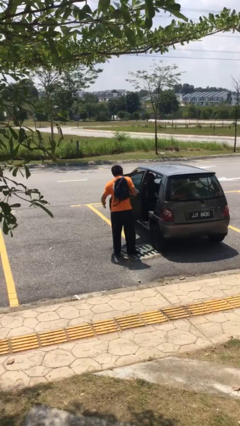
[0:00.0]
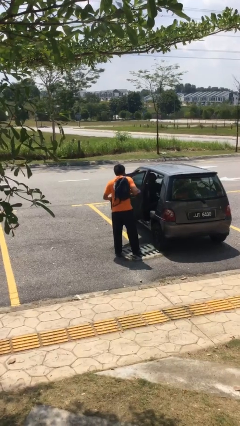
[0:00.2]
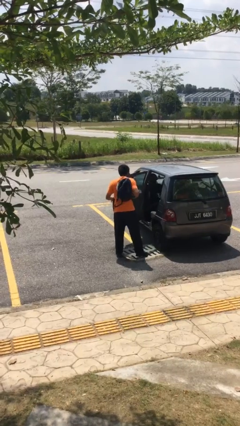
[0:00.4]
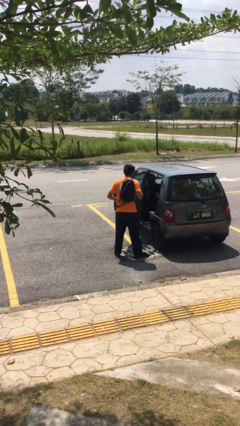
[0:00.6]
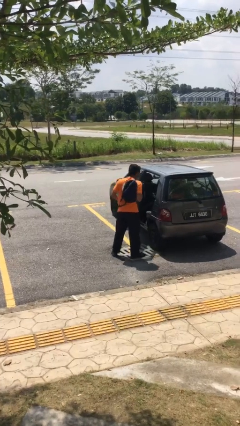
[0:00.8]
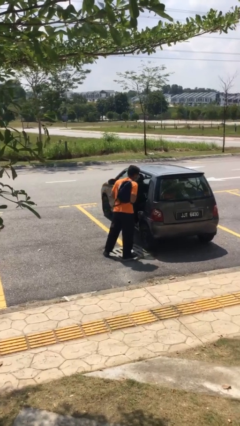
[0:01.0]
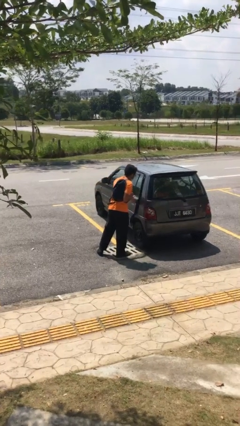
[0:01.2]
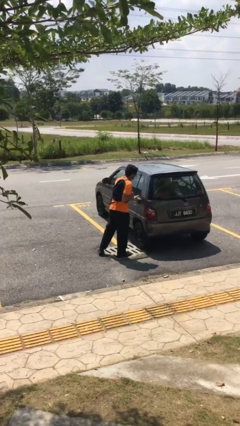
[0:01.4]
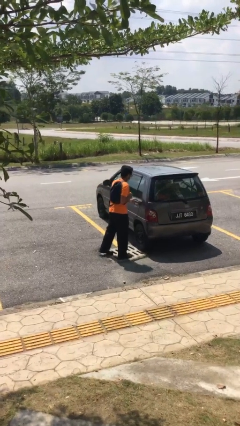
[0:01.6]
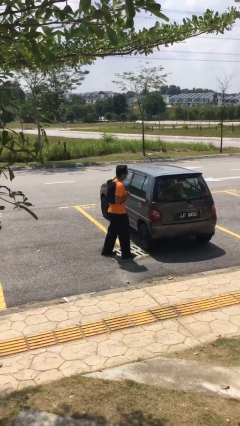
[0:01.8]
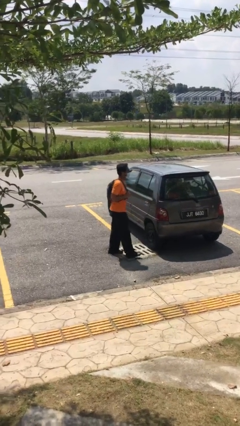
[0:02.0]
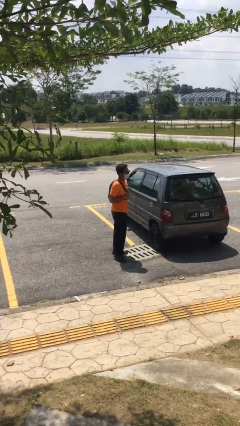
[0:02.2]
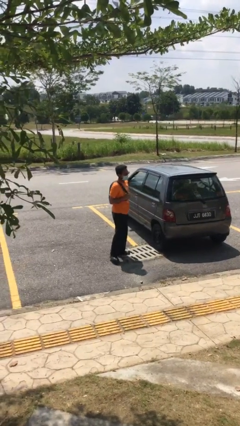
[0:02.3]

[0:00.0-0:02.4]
person closes car door

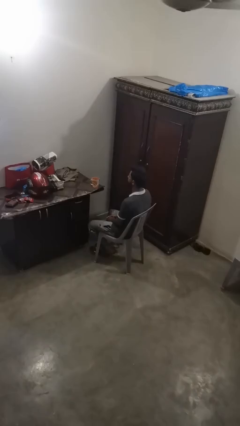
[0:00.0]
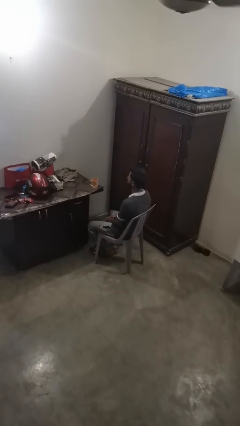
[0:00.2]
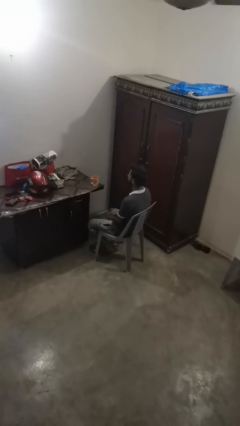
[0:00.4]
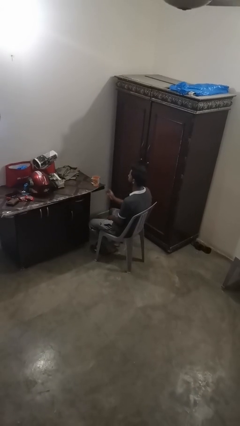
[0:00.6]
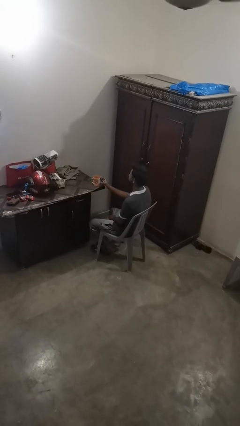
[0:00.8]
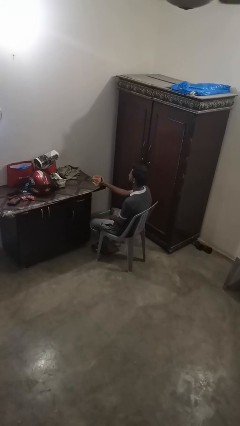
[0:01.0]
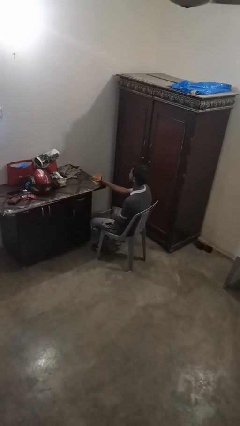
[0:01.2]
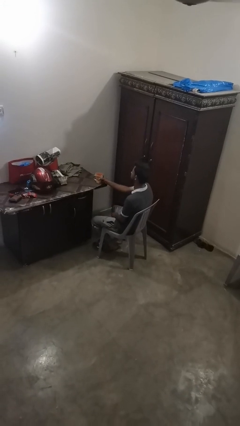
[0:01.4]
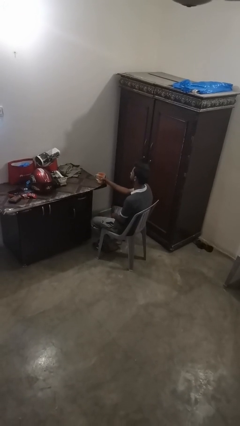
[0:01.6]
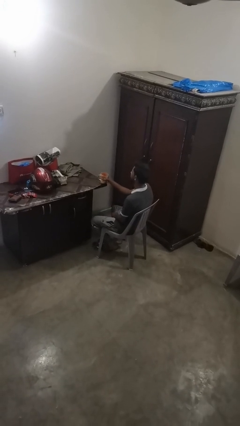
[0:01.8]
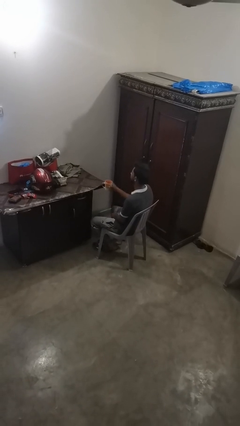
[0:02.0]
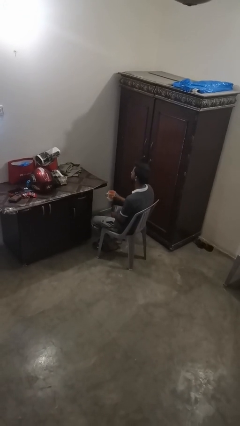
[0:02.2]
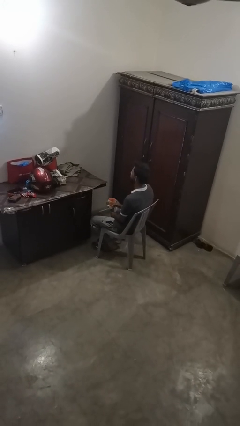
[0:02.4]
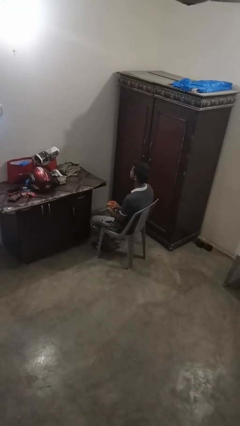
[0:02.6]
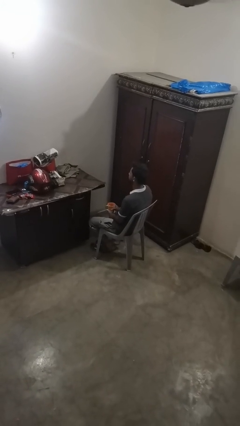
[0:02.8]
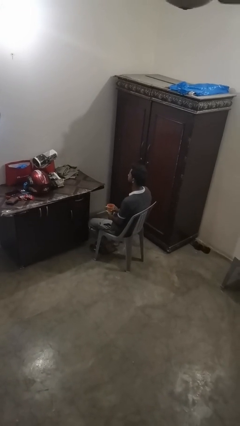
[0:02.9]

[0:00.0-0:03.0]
person picks up object from table

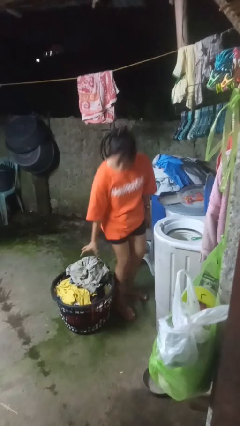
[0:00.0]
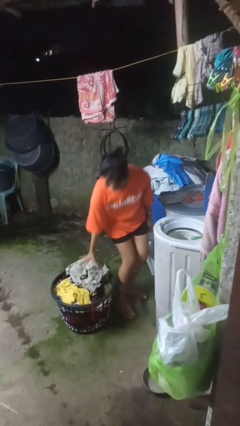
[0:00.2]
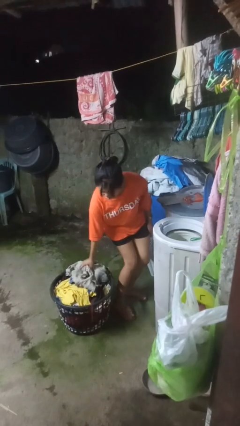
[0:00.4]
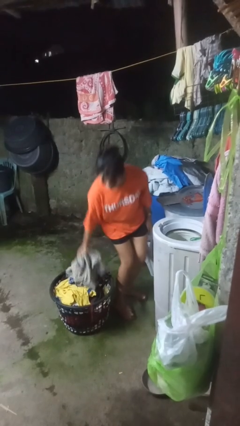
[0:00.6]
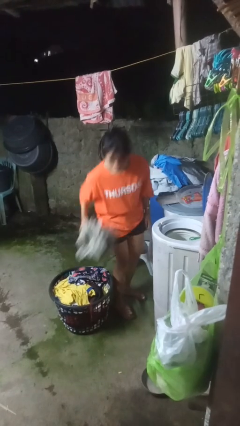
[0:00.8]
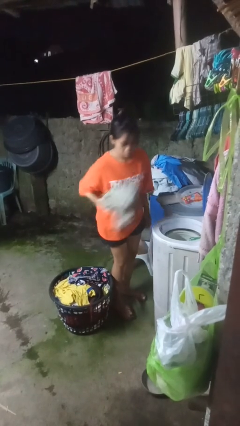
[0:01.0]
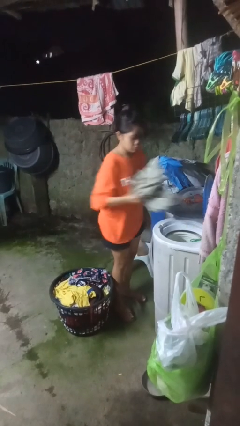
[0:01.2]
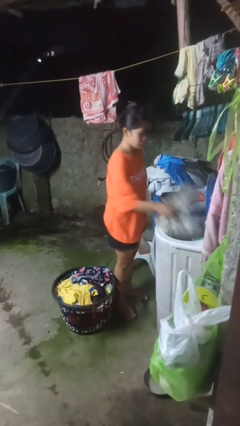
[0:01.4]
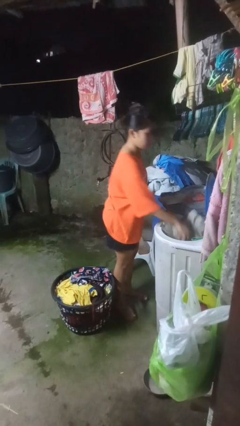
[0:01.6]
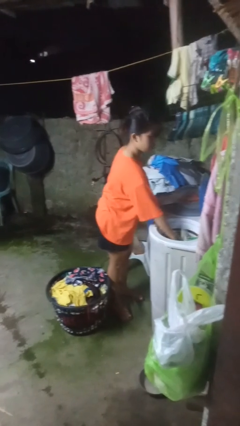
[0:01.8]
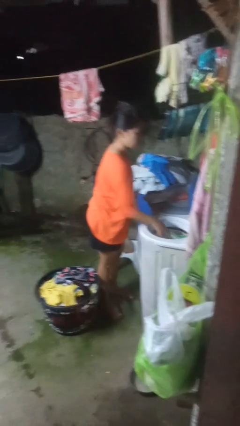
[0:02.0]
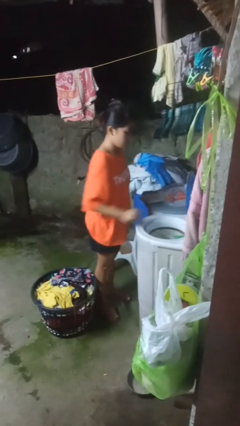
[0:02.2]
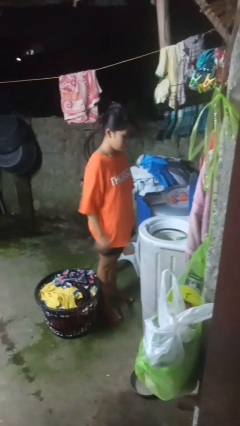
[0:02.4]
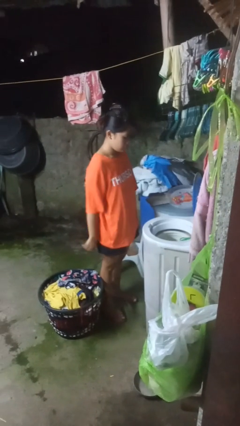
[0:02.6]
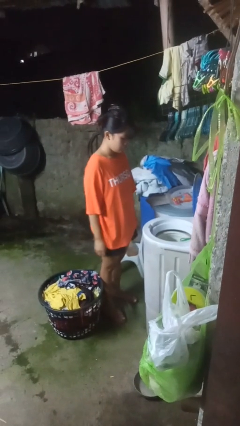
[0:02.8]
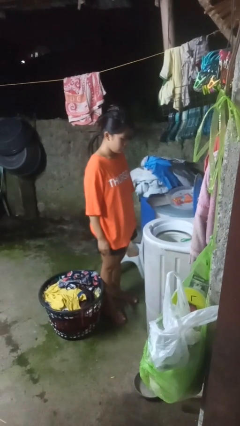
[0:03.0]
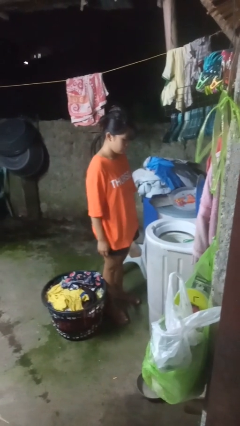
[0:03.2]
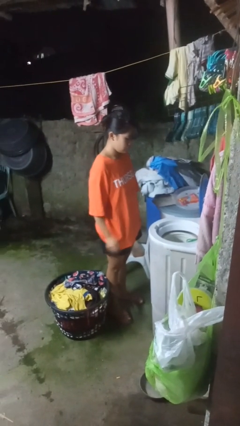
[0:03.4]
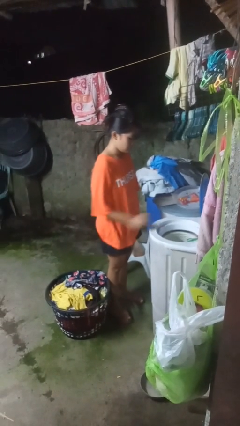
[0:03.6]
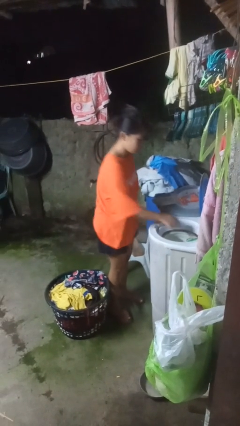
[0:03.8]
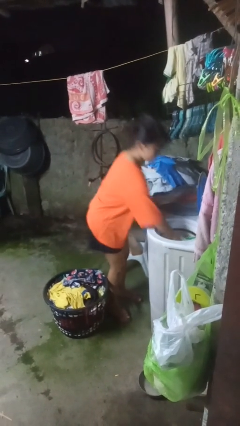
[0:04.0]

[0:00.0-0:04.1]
person loads dryer

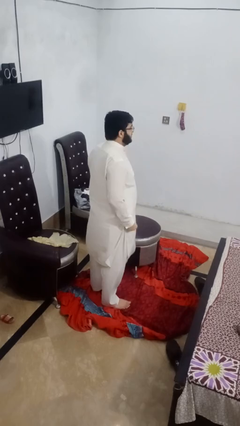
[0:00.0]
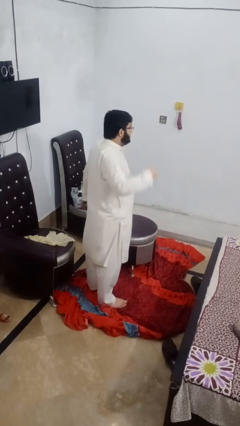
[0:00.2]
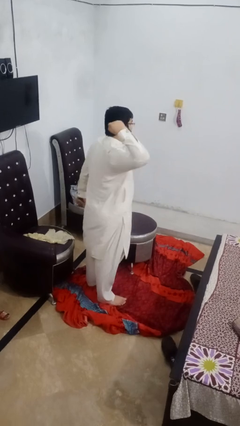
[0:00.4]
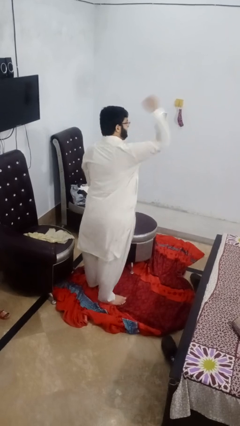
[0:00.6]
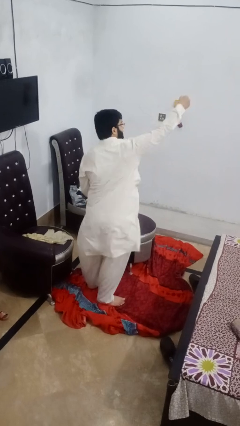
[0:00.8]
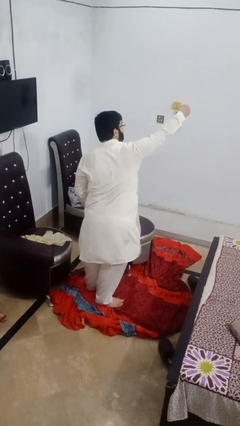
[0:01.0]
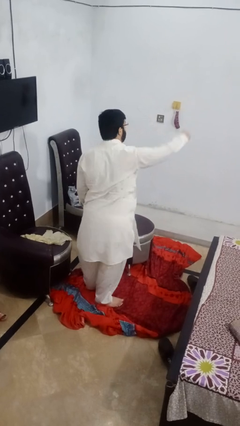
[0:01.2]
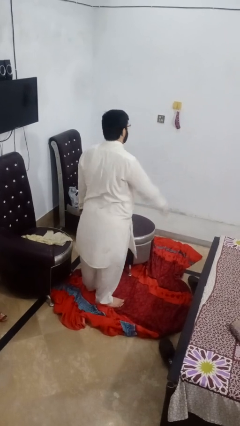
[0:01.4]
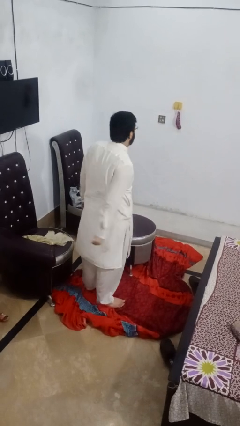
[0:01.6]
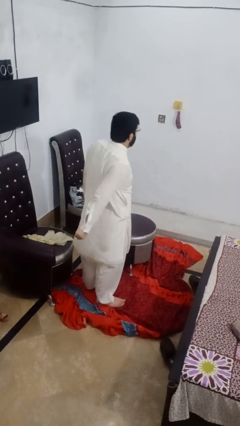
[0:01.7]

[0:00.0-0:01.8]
person punches

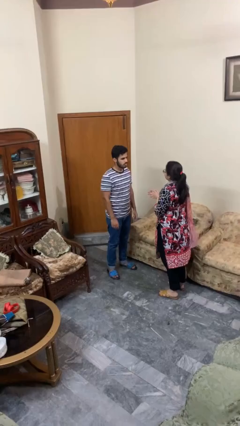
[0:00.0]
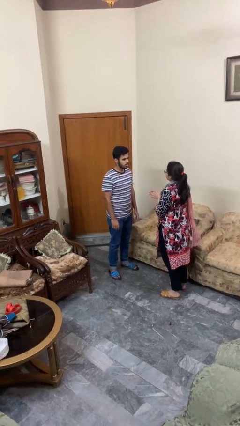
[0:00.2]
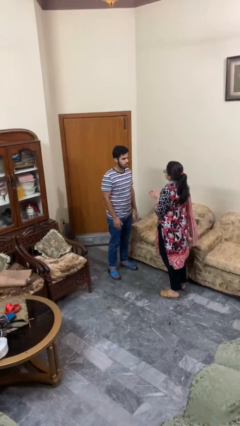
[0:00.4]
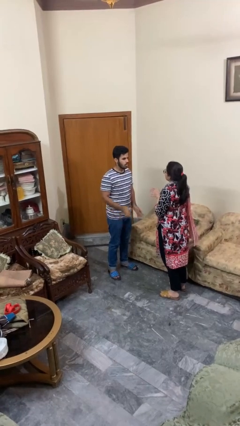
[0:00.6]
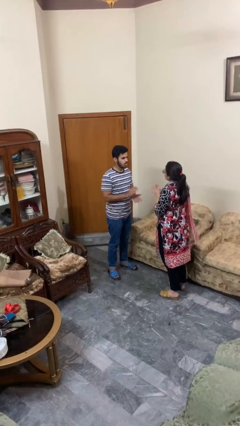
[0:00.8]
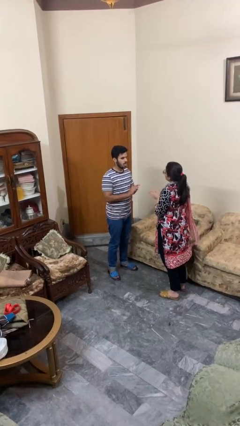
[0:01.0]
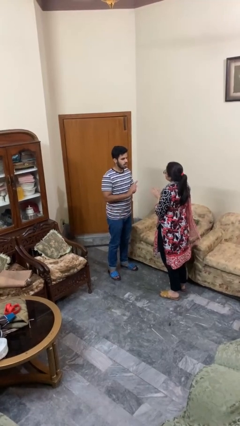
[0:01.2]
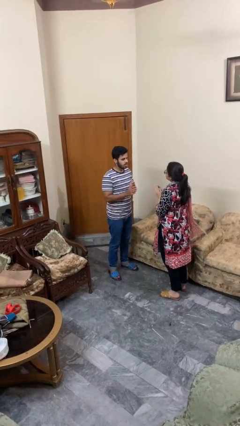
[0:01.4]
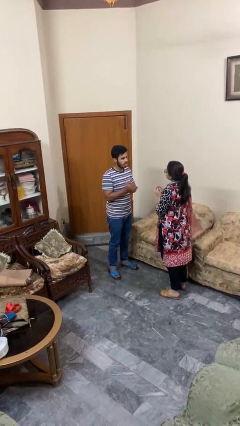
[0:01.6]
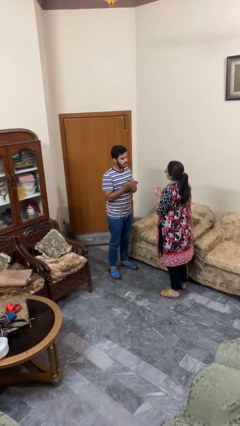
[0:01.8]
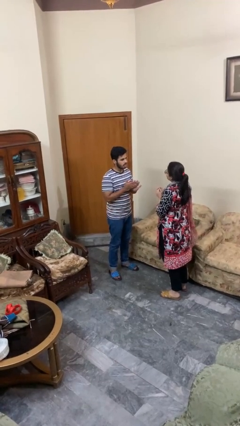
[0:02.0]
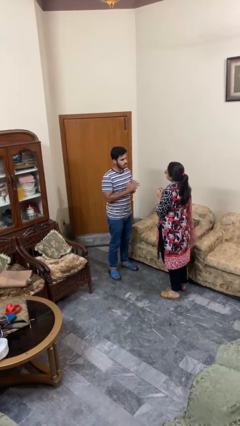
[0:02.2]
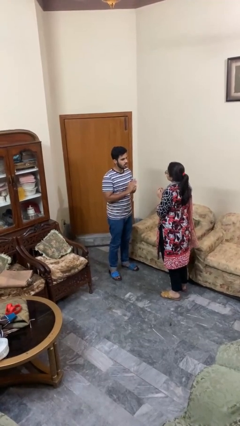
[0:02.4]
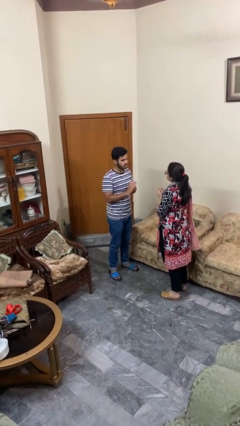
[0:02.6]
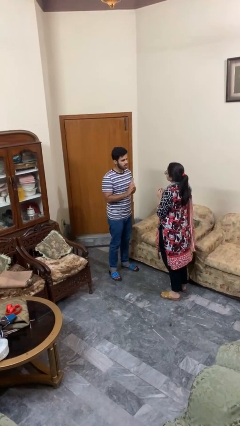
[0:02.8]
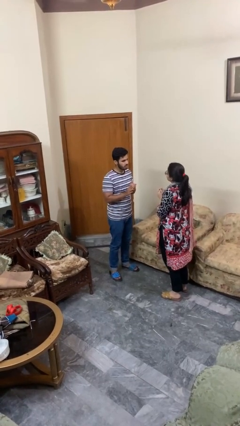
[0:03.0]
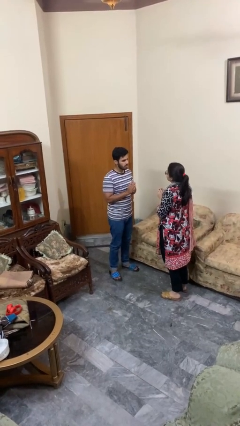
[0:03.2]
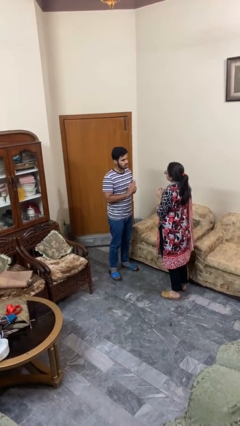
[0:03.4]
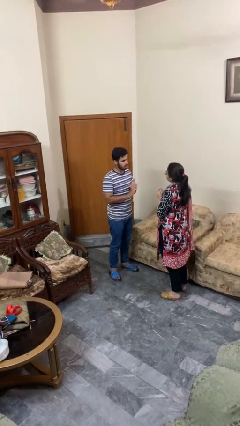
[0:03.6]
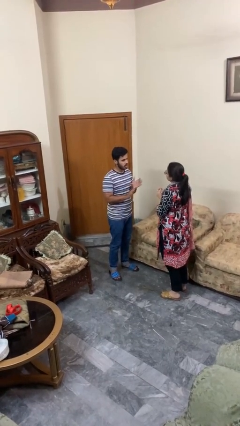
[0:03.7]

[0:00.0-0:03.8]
person talks to person

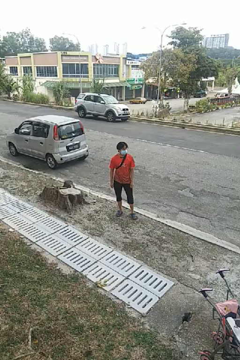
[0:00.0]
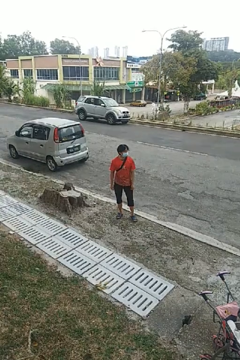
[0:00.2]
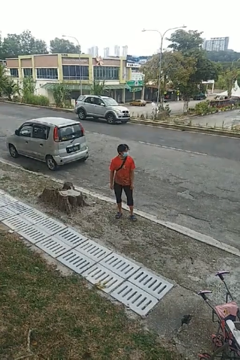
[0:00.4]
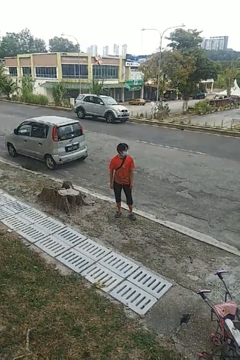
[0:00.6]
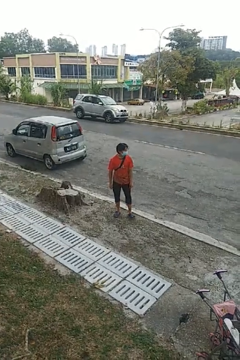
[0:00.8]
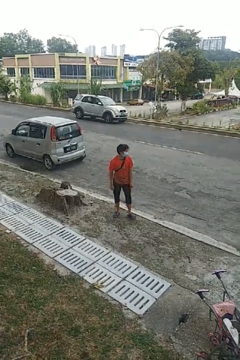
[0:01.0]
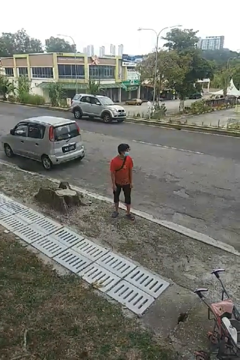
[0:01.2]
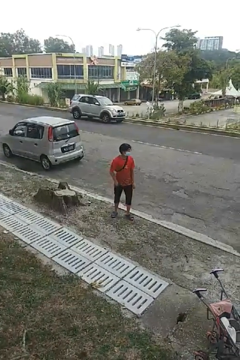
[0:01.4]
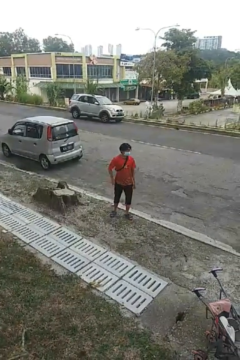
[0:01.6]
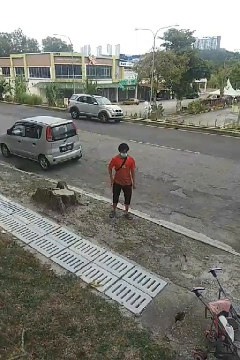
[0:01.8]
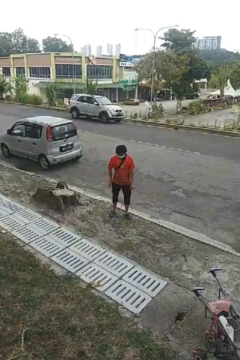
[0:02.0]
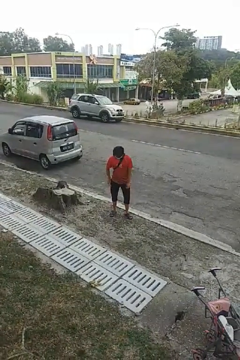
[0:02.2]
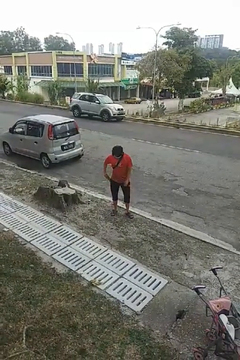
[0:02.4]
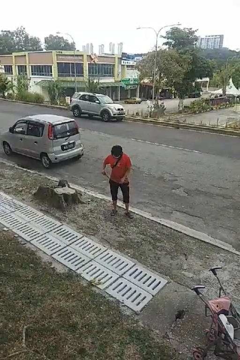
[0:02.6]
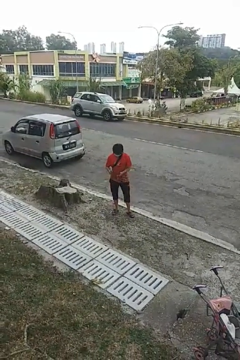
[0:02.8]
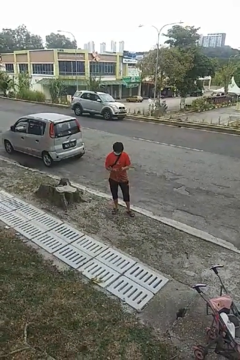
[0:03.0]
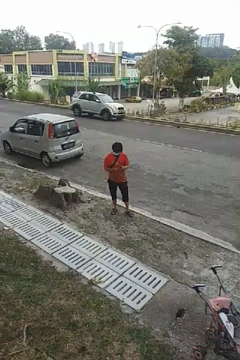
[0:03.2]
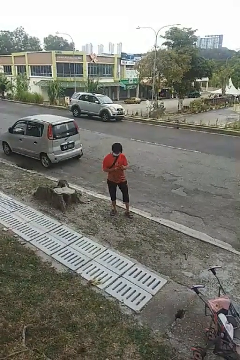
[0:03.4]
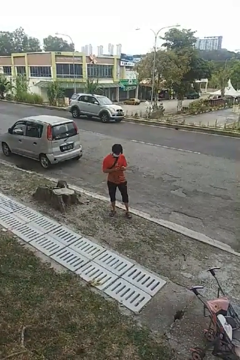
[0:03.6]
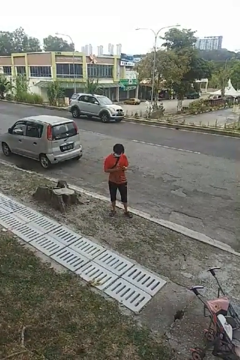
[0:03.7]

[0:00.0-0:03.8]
person takes phone from pocket
